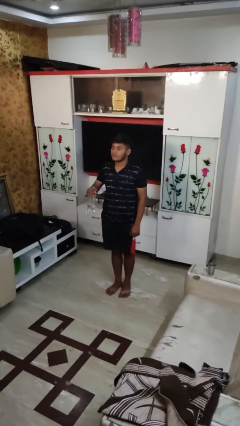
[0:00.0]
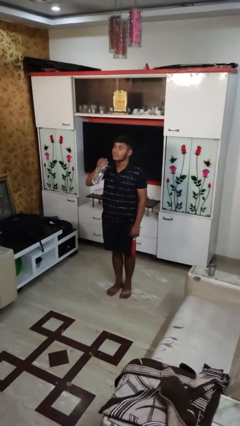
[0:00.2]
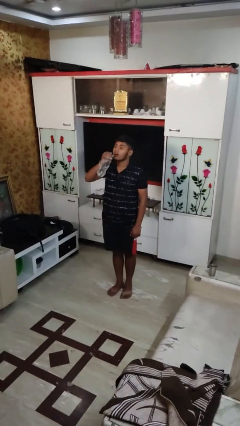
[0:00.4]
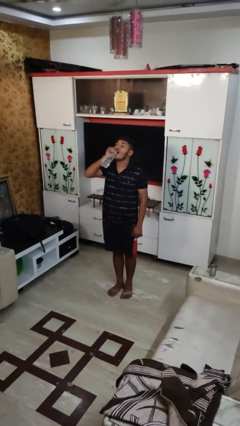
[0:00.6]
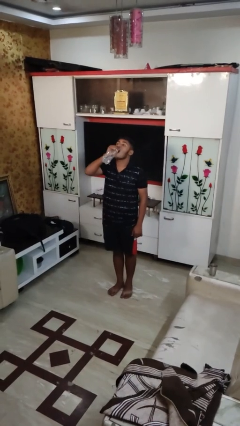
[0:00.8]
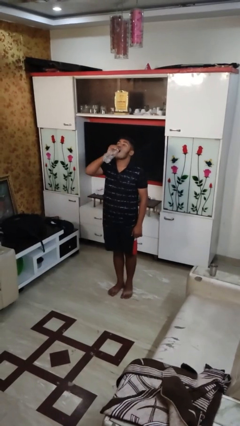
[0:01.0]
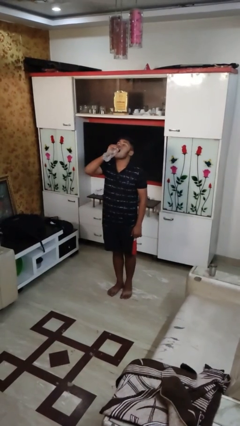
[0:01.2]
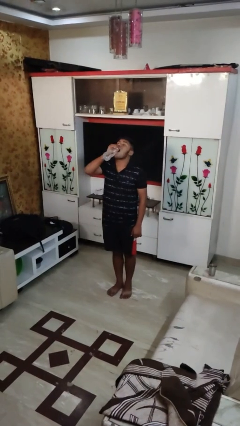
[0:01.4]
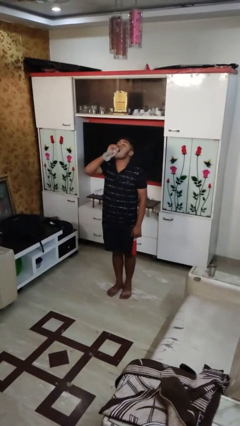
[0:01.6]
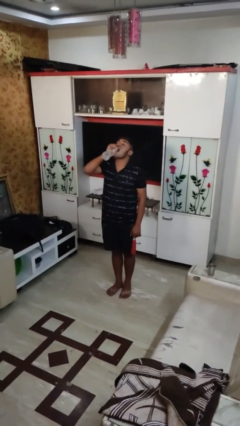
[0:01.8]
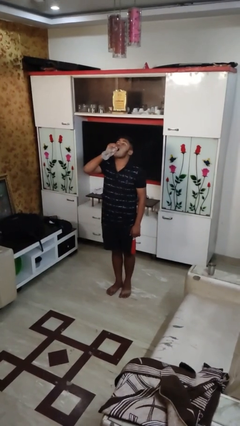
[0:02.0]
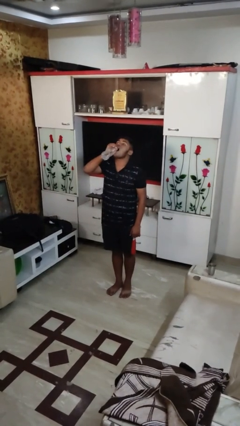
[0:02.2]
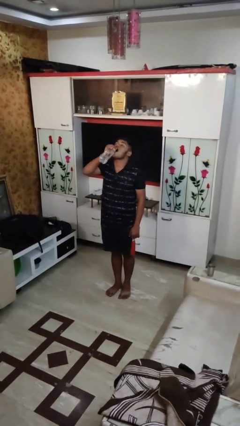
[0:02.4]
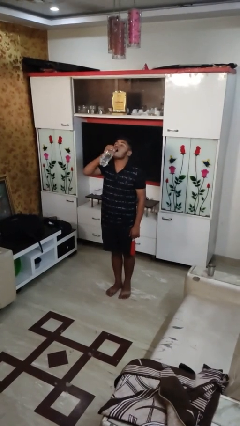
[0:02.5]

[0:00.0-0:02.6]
person drinks from bottle

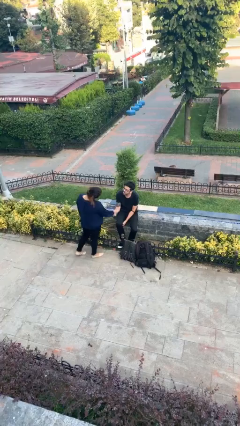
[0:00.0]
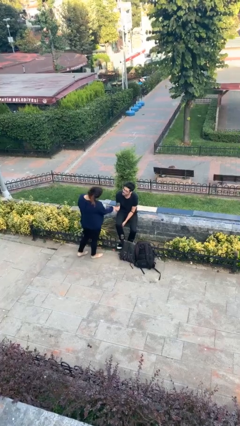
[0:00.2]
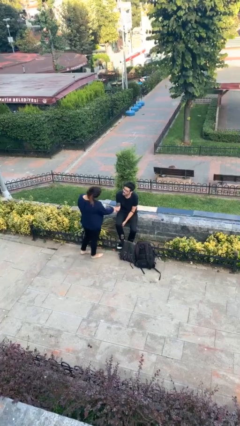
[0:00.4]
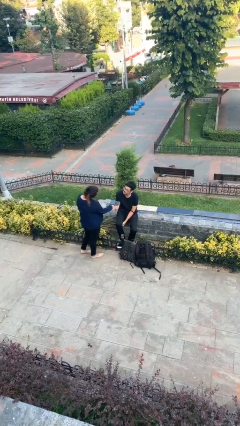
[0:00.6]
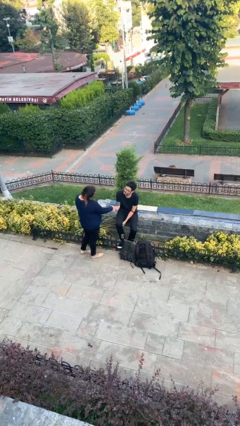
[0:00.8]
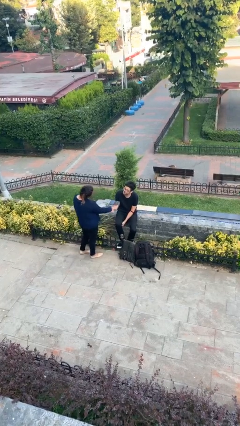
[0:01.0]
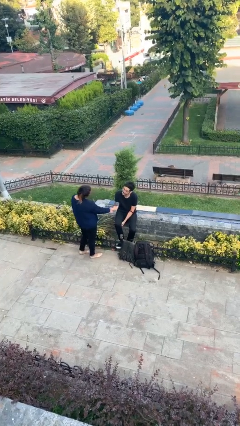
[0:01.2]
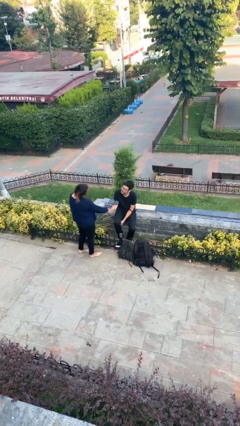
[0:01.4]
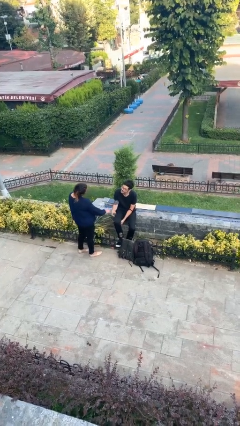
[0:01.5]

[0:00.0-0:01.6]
person shakes hand

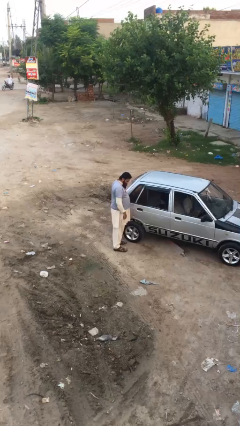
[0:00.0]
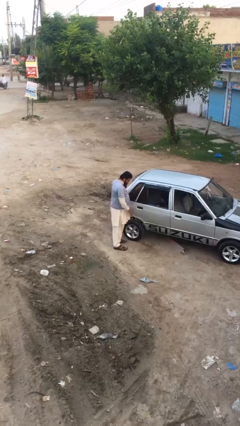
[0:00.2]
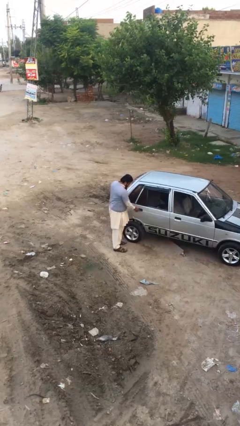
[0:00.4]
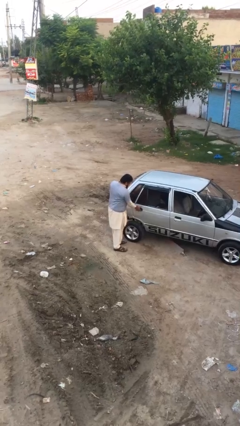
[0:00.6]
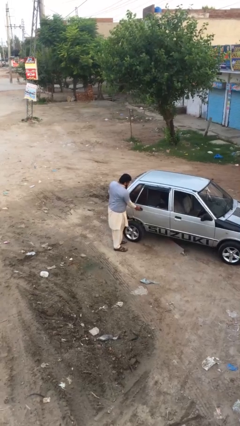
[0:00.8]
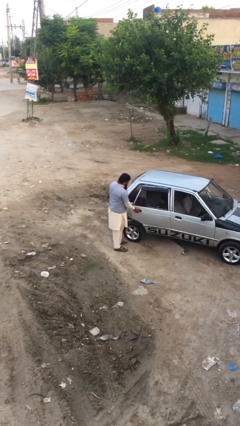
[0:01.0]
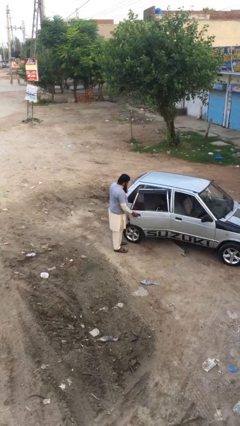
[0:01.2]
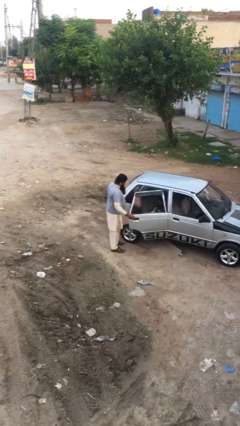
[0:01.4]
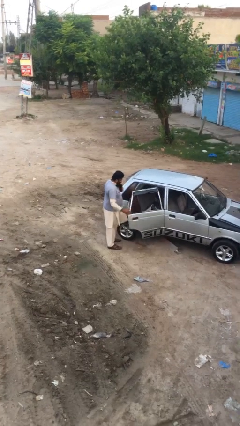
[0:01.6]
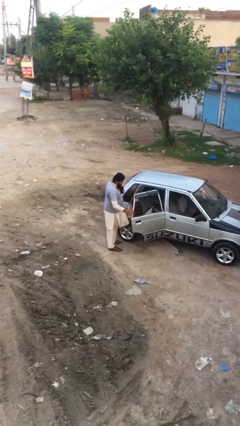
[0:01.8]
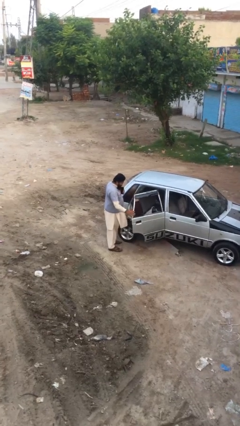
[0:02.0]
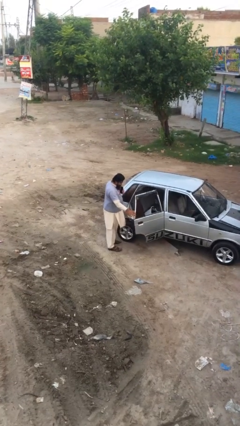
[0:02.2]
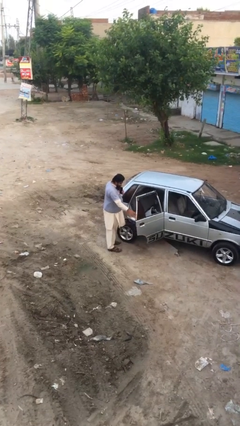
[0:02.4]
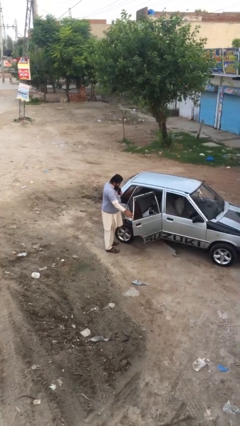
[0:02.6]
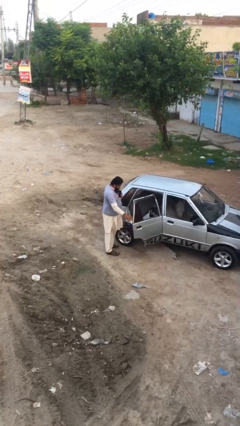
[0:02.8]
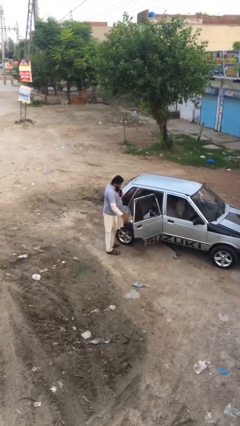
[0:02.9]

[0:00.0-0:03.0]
person opens car door

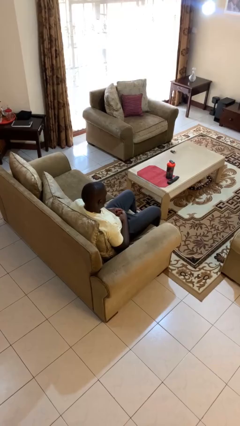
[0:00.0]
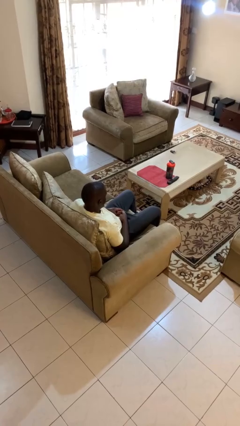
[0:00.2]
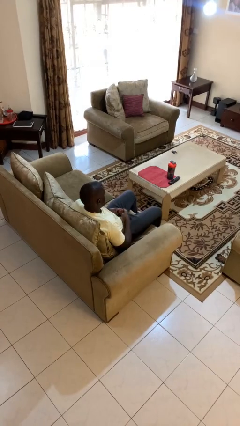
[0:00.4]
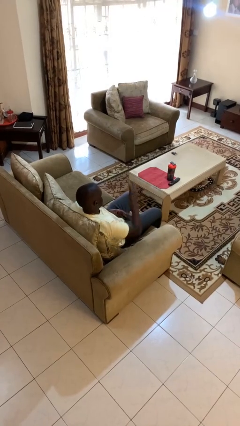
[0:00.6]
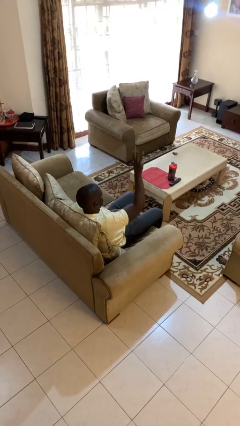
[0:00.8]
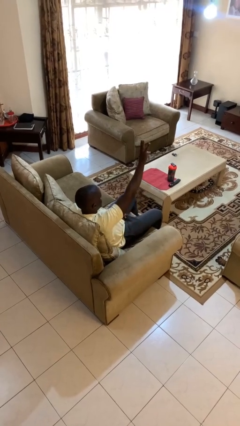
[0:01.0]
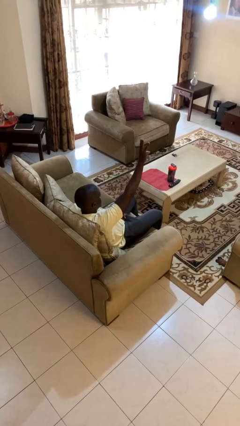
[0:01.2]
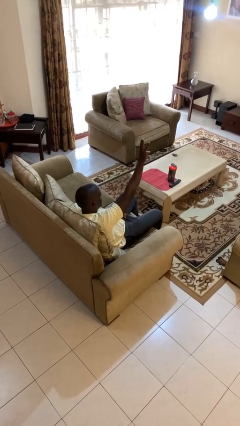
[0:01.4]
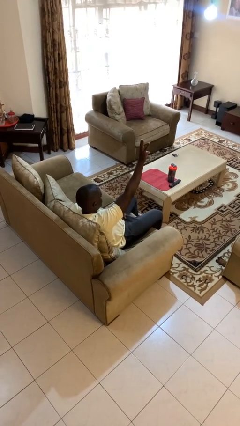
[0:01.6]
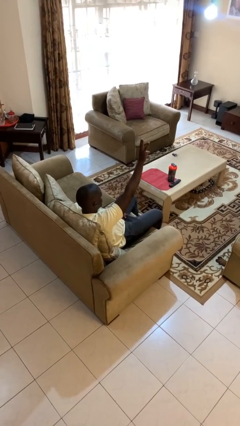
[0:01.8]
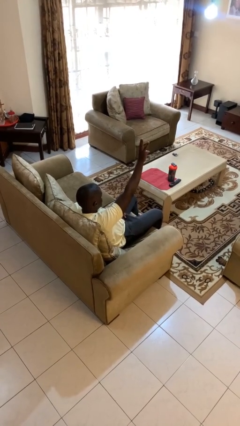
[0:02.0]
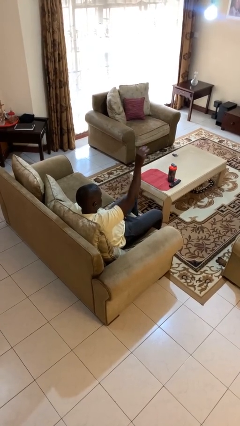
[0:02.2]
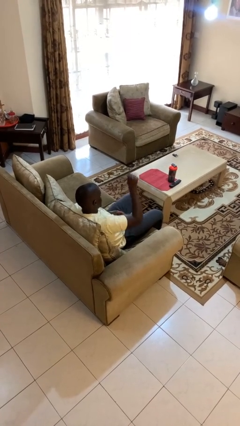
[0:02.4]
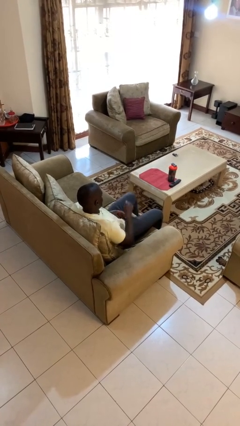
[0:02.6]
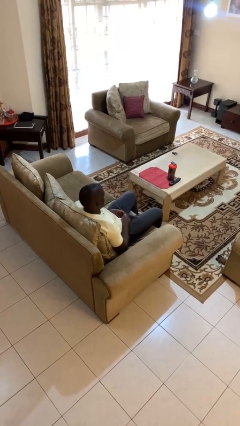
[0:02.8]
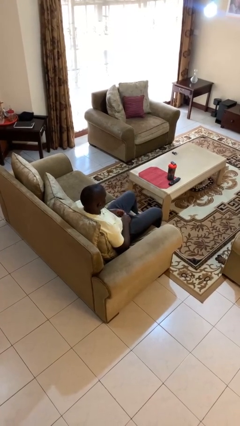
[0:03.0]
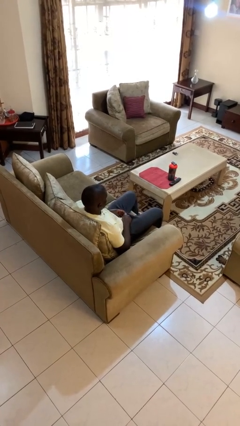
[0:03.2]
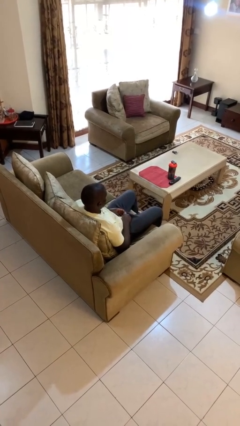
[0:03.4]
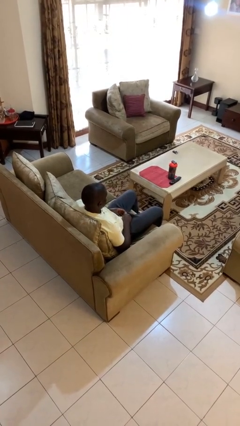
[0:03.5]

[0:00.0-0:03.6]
person gestures number three

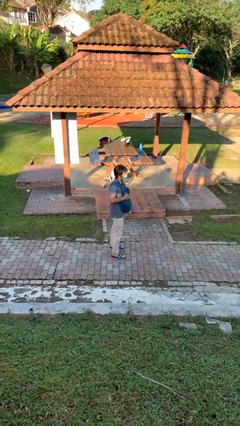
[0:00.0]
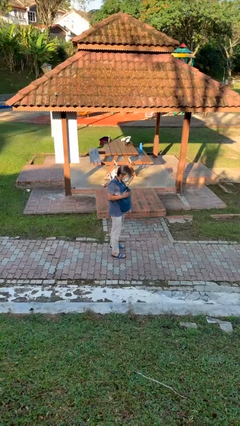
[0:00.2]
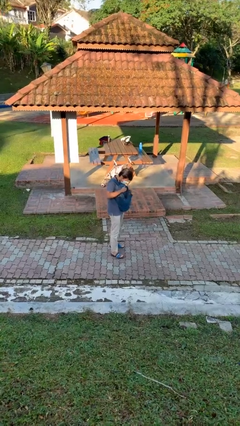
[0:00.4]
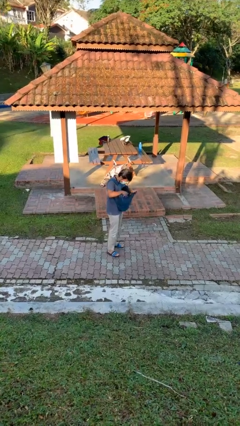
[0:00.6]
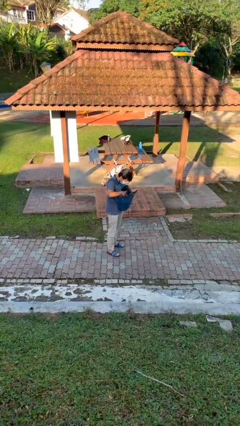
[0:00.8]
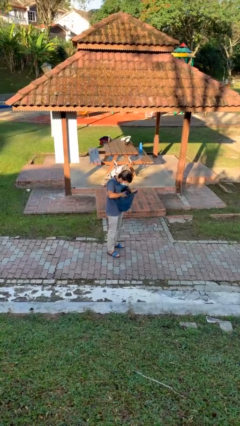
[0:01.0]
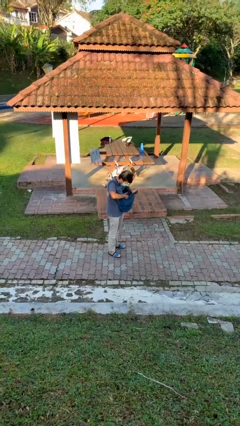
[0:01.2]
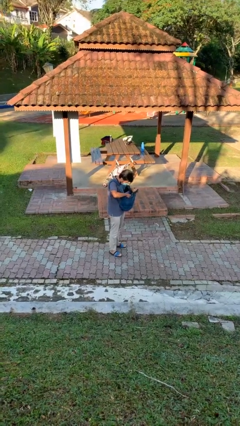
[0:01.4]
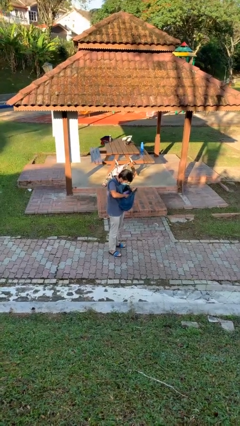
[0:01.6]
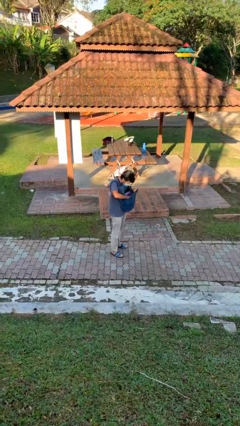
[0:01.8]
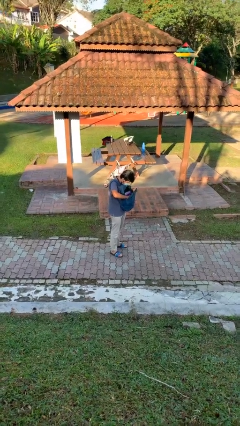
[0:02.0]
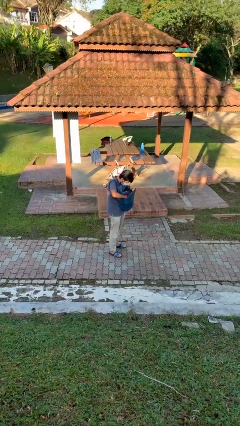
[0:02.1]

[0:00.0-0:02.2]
person searches in backpack

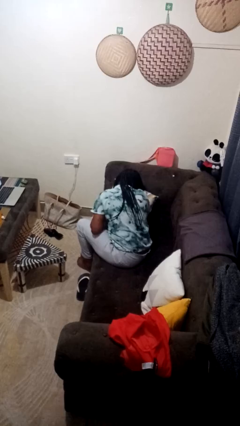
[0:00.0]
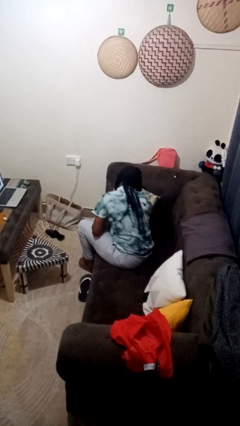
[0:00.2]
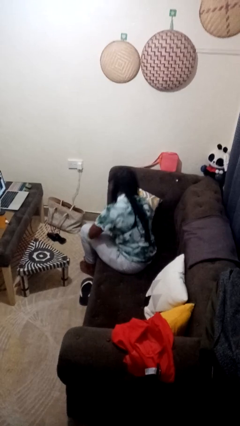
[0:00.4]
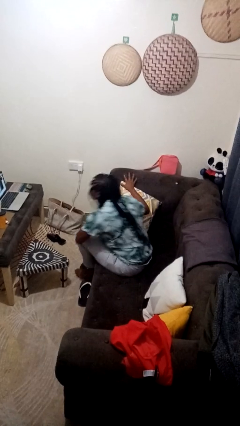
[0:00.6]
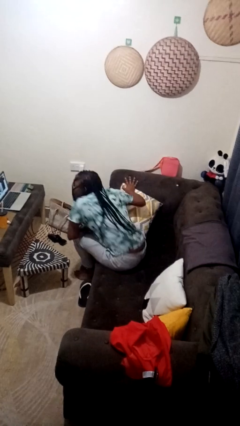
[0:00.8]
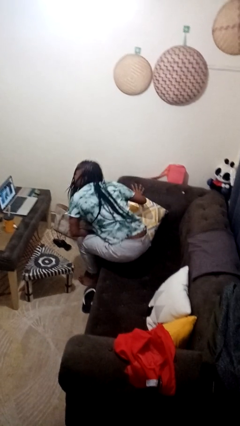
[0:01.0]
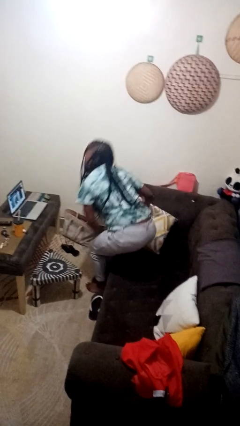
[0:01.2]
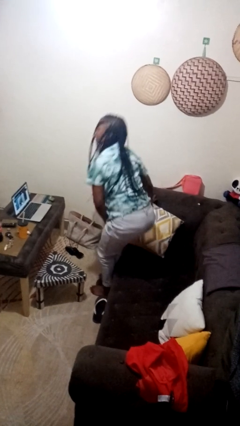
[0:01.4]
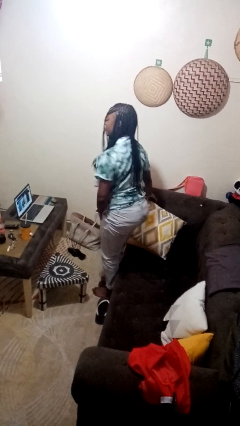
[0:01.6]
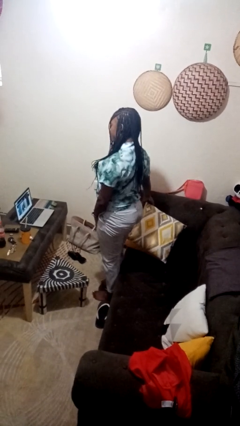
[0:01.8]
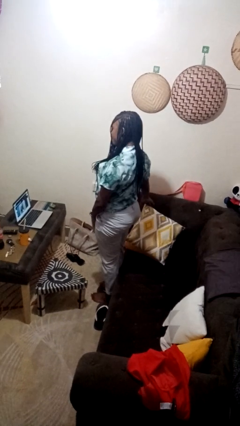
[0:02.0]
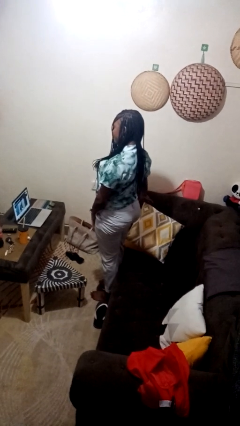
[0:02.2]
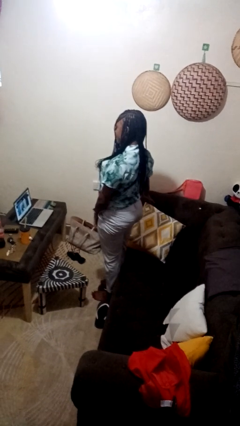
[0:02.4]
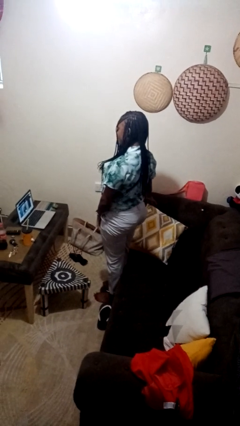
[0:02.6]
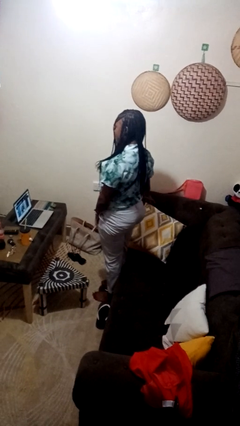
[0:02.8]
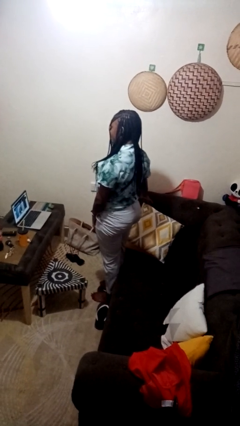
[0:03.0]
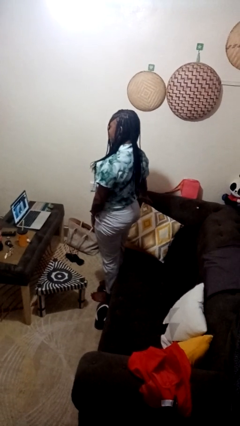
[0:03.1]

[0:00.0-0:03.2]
person stands up

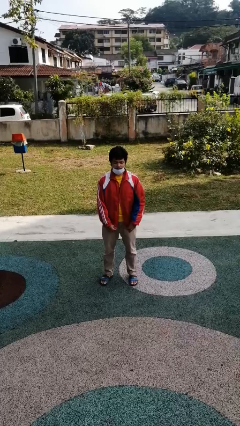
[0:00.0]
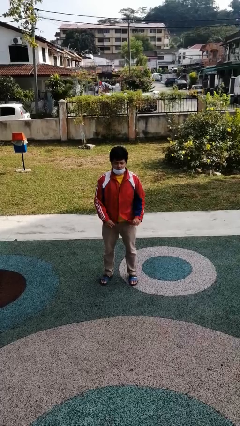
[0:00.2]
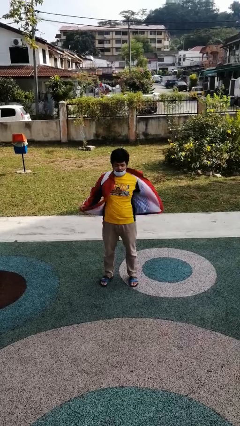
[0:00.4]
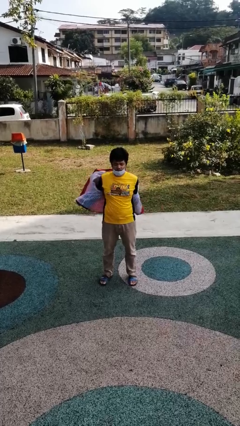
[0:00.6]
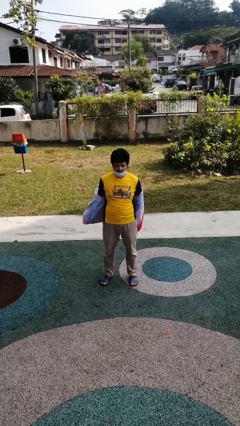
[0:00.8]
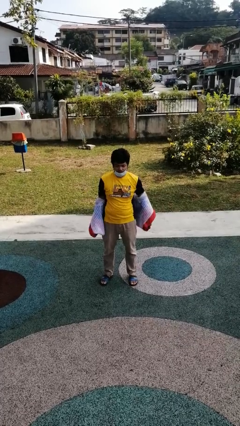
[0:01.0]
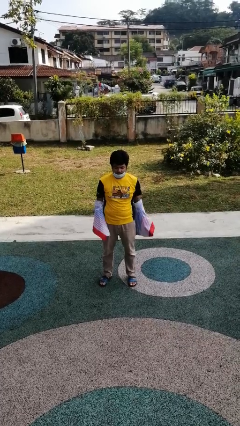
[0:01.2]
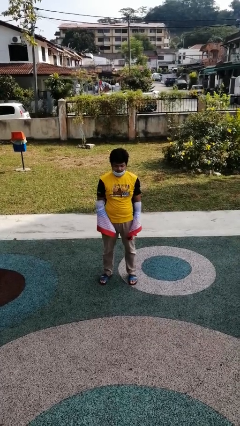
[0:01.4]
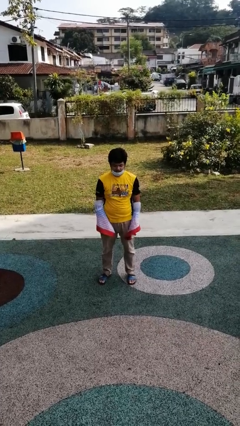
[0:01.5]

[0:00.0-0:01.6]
person takes off jacket
